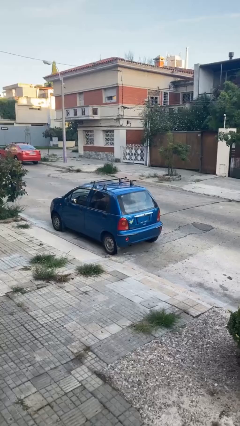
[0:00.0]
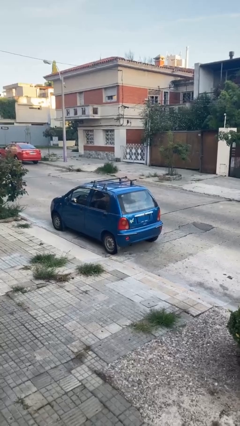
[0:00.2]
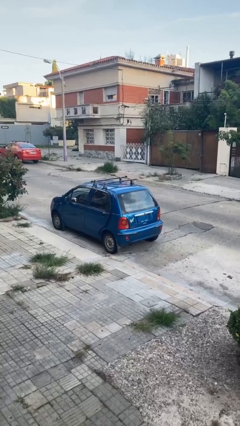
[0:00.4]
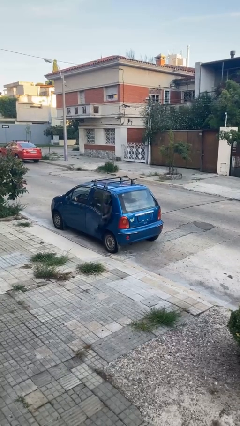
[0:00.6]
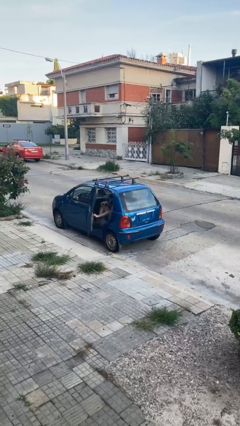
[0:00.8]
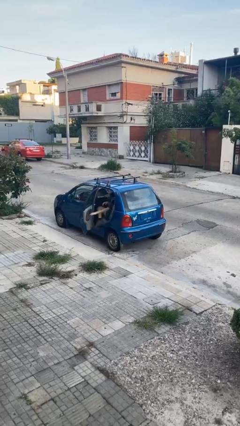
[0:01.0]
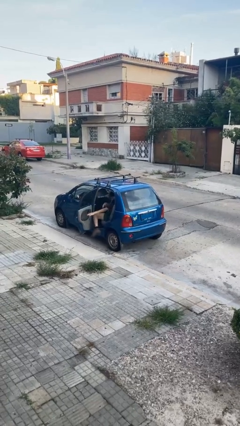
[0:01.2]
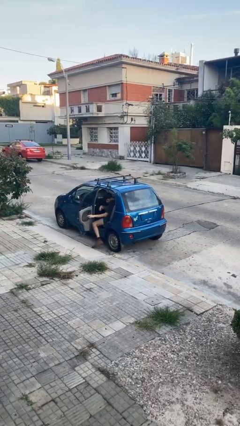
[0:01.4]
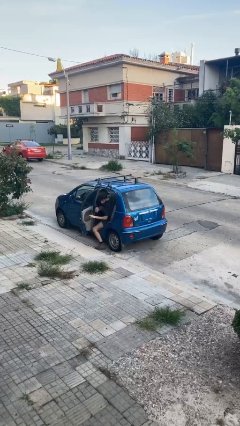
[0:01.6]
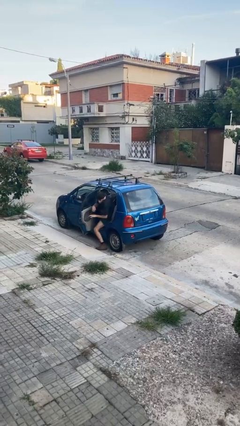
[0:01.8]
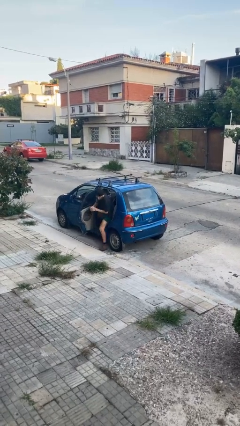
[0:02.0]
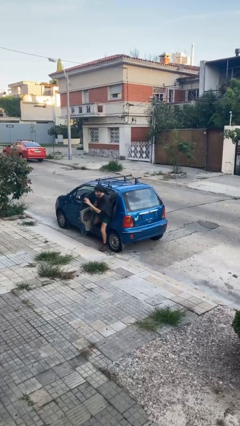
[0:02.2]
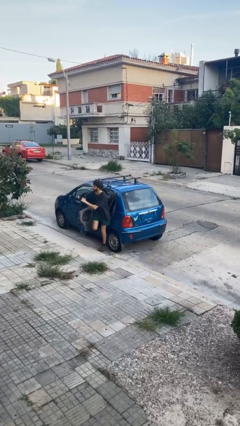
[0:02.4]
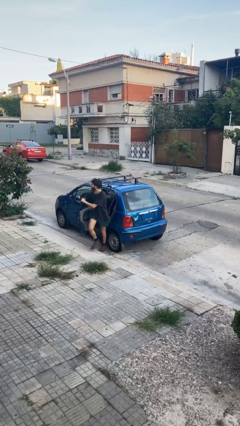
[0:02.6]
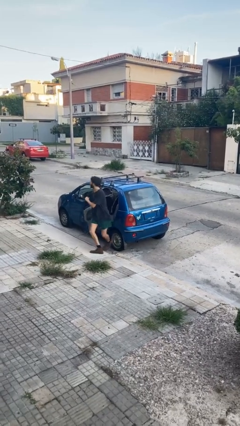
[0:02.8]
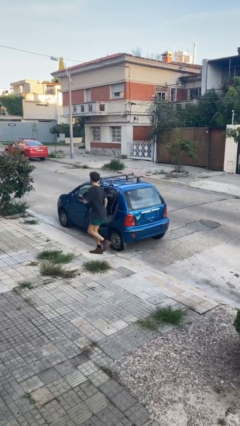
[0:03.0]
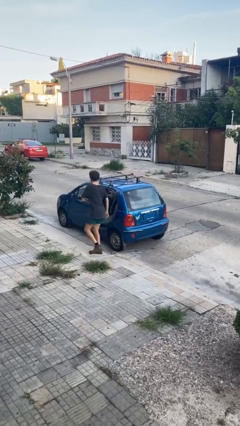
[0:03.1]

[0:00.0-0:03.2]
car drops off person

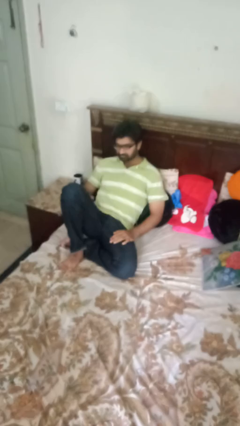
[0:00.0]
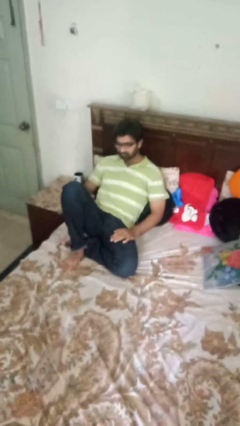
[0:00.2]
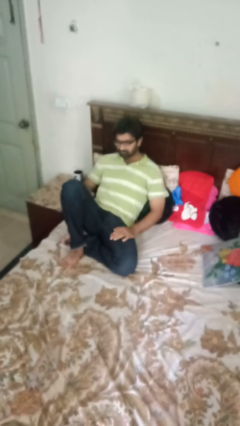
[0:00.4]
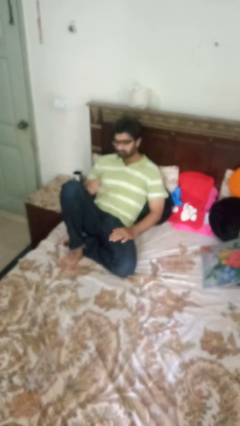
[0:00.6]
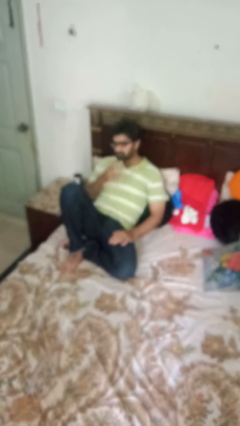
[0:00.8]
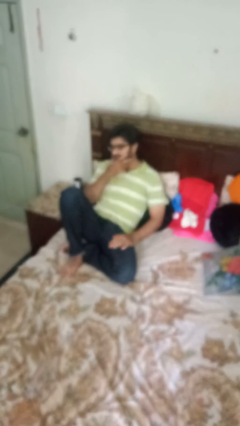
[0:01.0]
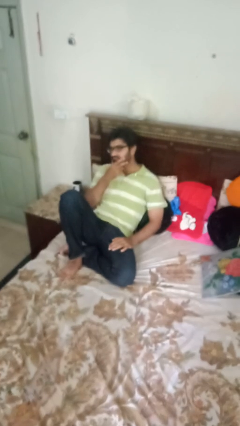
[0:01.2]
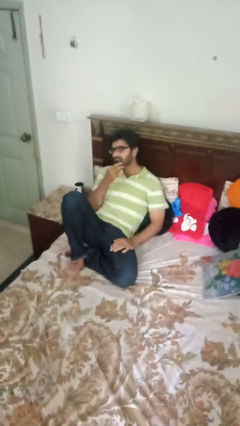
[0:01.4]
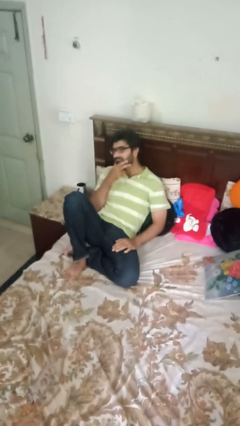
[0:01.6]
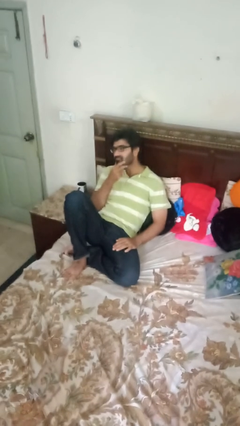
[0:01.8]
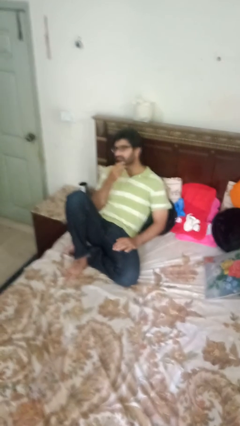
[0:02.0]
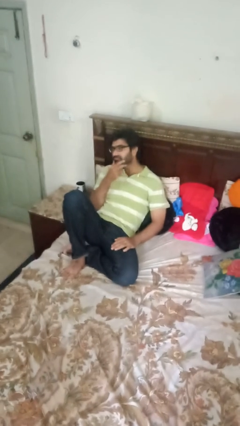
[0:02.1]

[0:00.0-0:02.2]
person strokes chin

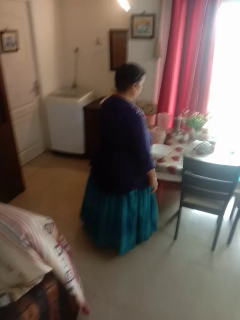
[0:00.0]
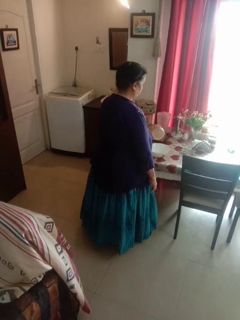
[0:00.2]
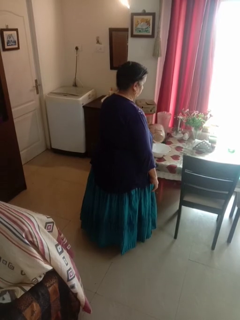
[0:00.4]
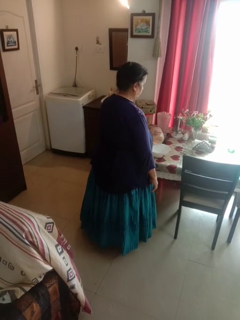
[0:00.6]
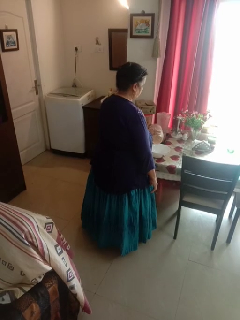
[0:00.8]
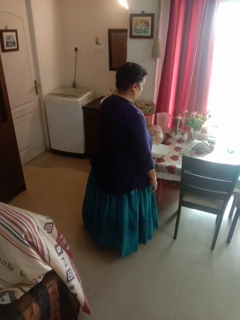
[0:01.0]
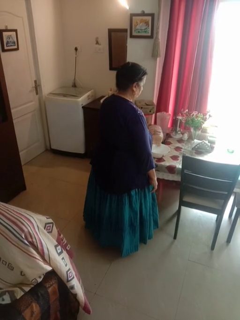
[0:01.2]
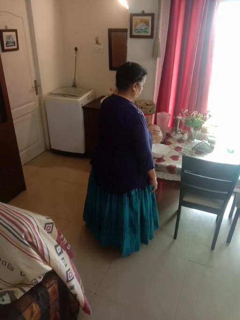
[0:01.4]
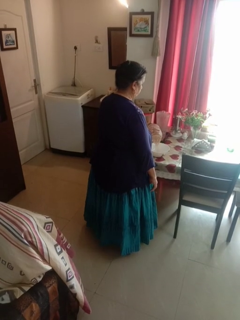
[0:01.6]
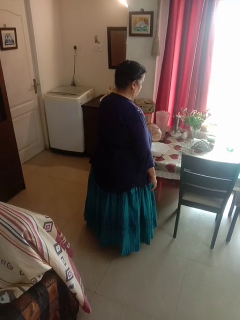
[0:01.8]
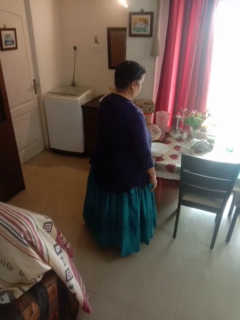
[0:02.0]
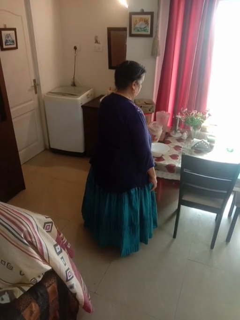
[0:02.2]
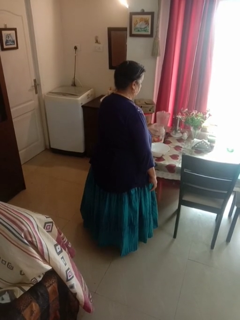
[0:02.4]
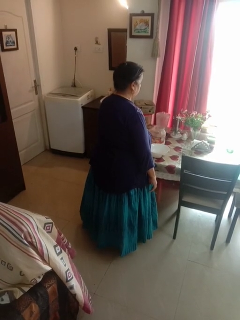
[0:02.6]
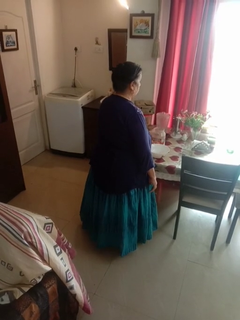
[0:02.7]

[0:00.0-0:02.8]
person pours into bowl

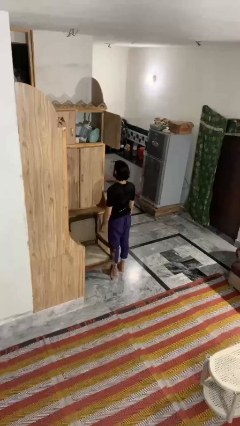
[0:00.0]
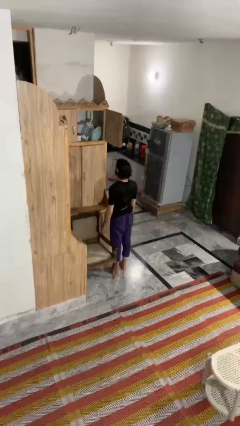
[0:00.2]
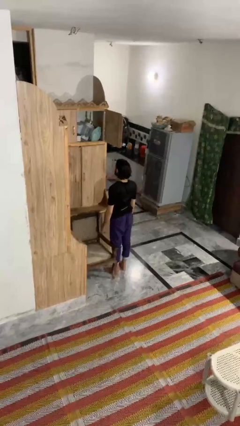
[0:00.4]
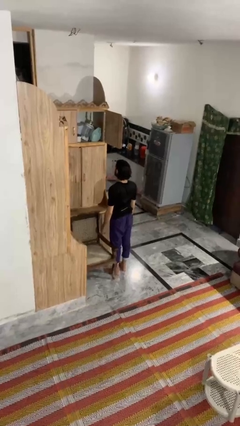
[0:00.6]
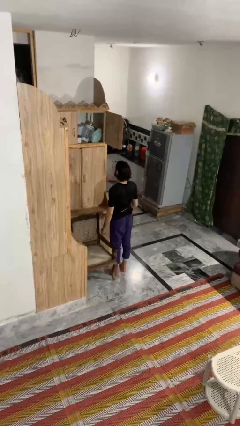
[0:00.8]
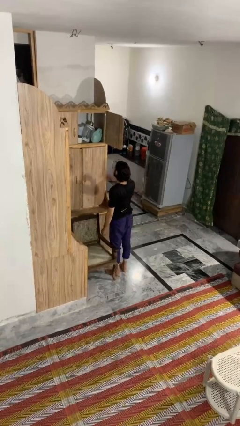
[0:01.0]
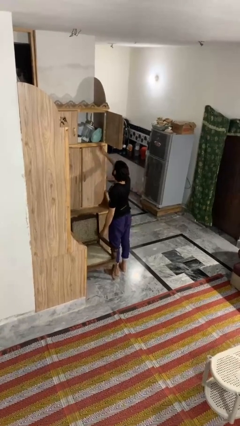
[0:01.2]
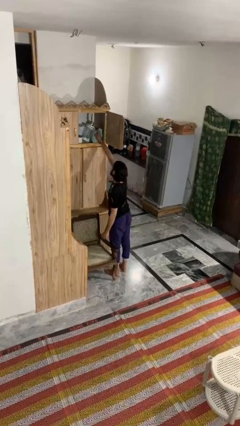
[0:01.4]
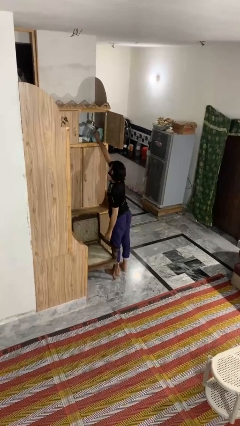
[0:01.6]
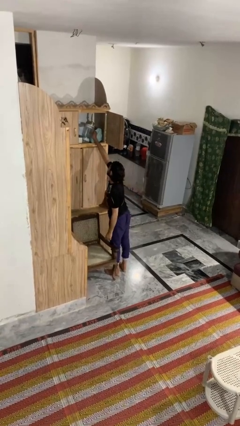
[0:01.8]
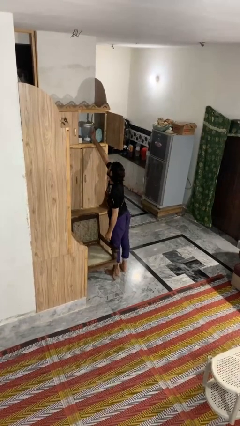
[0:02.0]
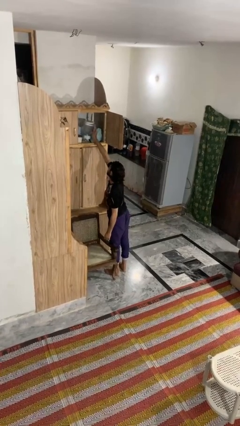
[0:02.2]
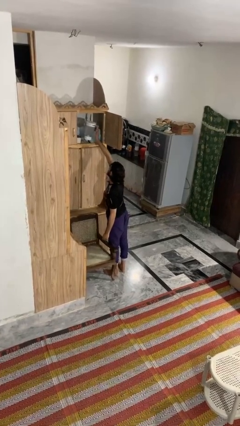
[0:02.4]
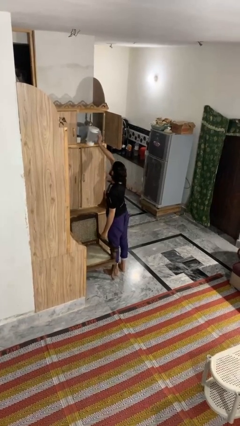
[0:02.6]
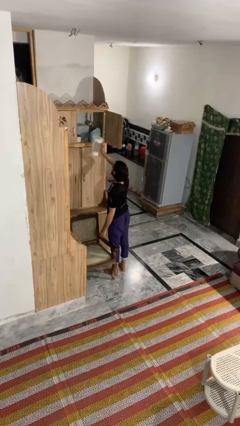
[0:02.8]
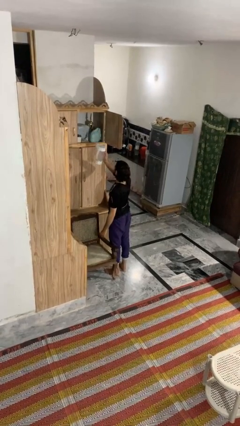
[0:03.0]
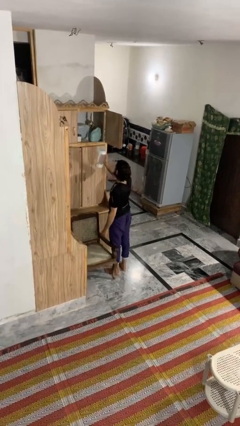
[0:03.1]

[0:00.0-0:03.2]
person picks up object from shelf

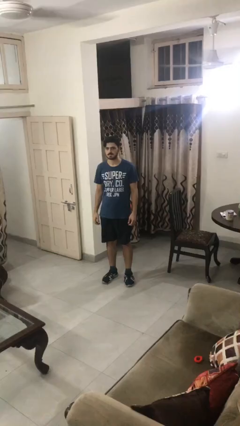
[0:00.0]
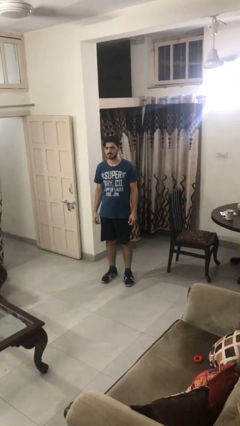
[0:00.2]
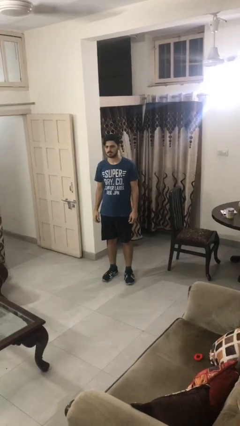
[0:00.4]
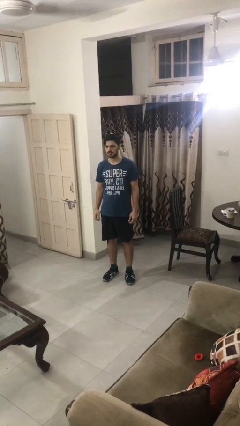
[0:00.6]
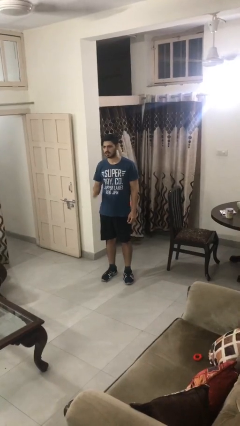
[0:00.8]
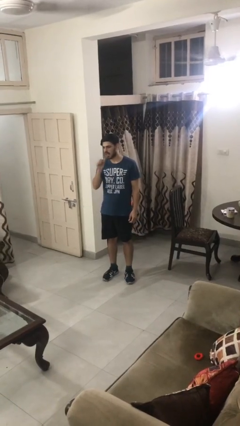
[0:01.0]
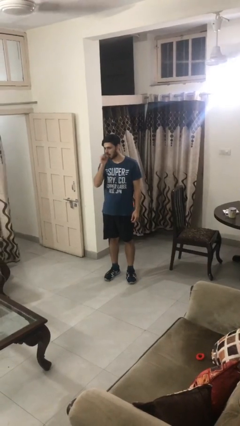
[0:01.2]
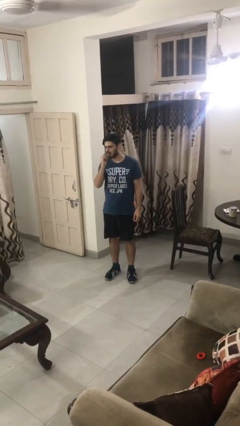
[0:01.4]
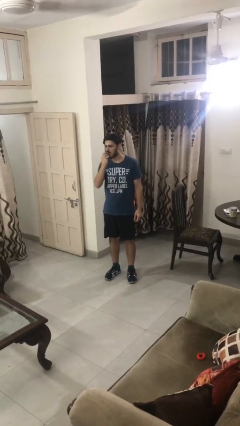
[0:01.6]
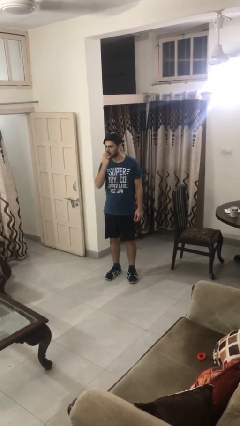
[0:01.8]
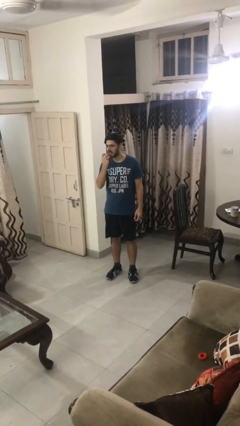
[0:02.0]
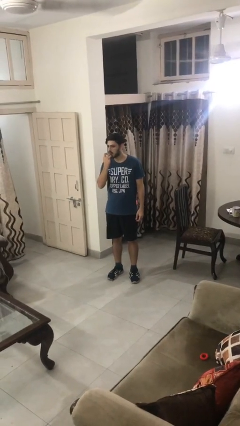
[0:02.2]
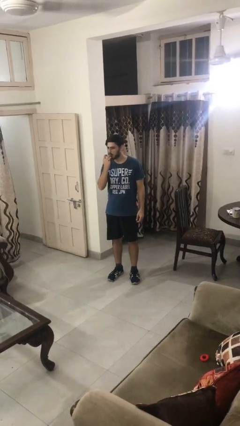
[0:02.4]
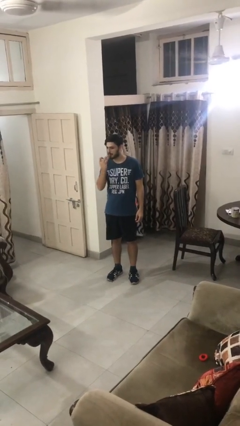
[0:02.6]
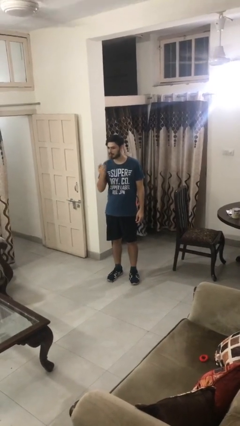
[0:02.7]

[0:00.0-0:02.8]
person licks fingers

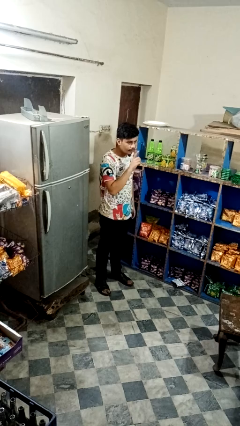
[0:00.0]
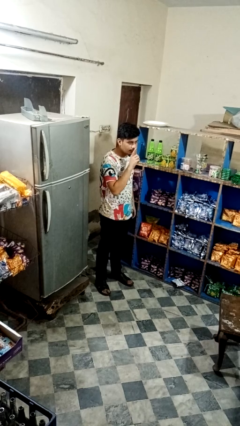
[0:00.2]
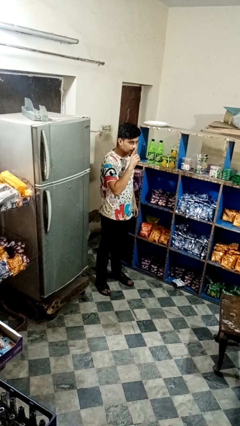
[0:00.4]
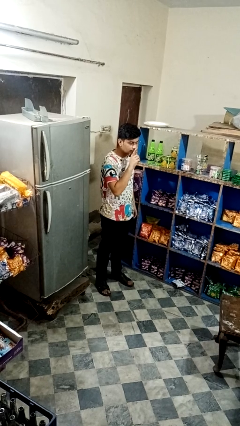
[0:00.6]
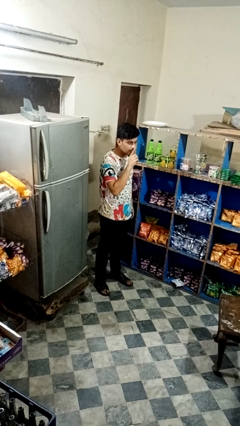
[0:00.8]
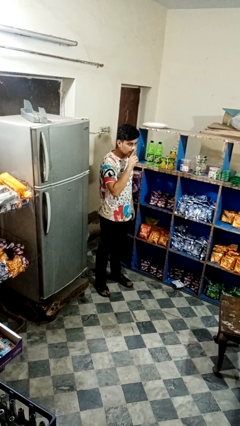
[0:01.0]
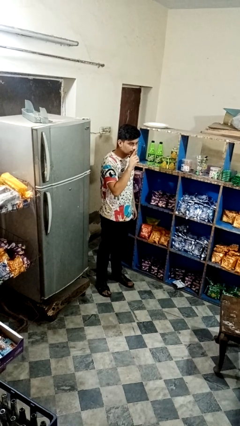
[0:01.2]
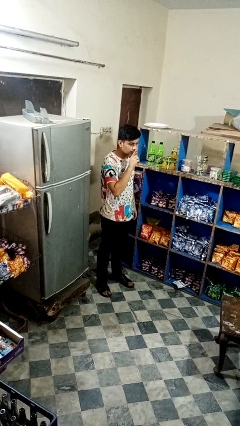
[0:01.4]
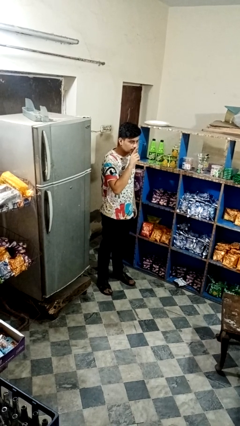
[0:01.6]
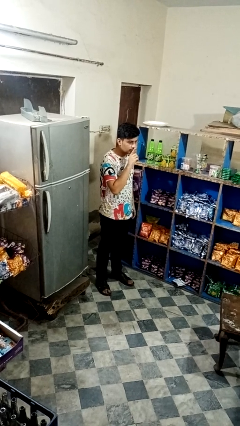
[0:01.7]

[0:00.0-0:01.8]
person gestures be quiet

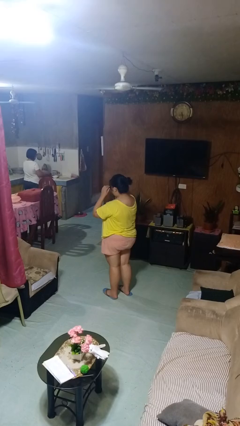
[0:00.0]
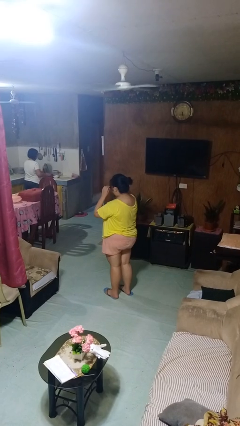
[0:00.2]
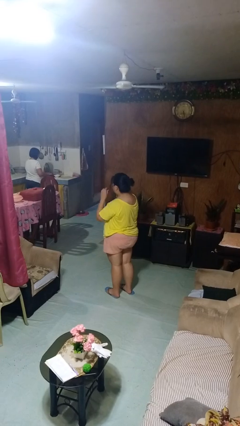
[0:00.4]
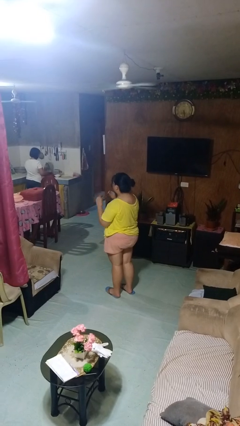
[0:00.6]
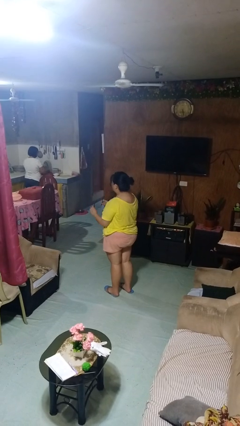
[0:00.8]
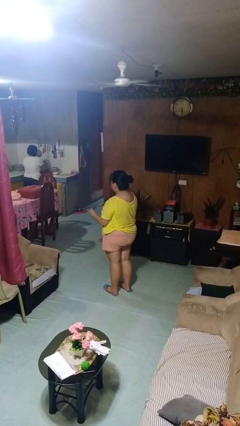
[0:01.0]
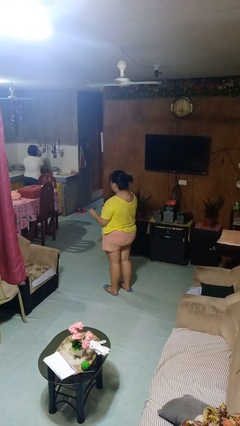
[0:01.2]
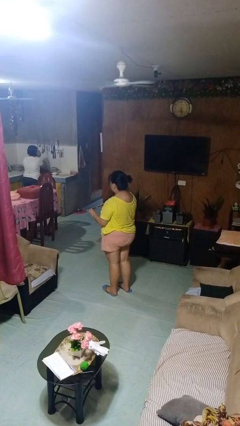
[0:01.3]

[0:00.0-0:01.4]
person takes off glasses

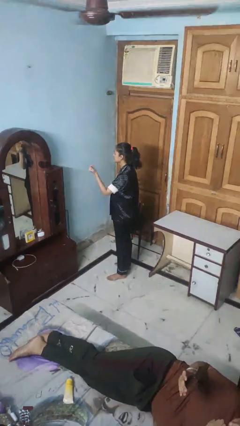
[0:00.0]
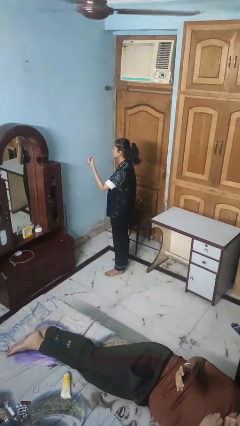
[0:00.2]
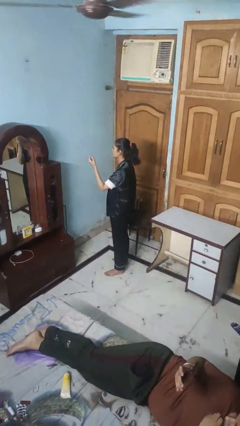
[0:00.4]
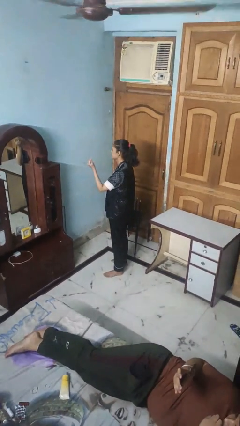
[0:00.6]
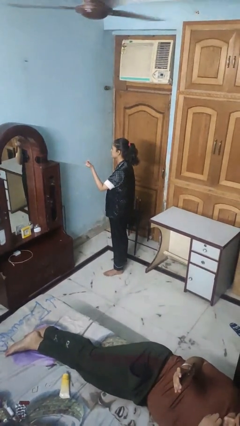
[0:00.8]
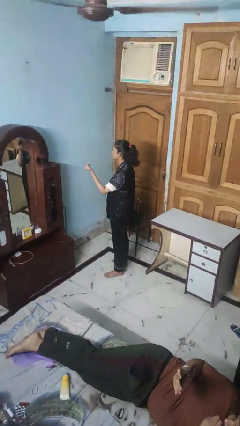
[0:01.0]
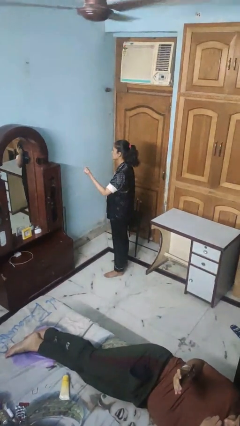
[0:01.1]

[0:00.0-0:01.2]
person snaps fingers
